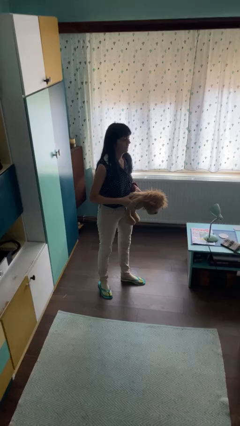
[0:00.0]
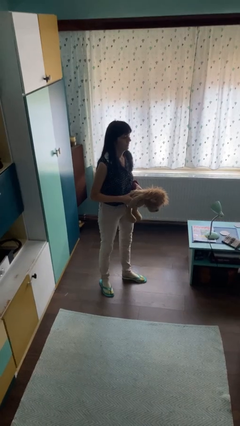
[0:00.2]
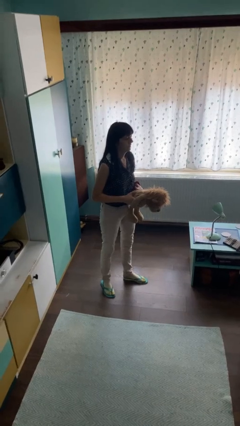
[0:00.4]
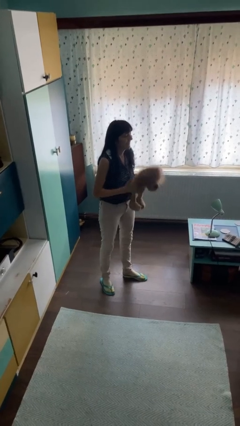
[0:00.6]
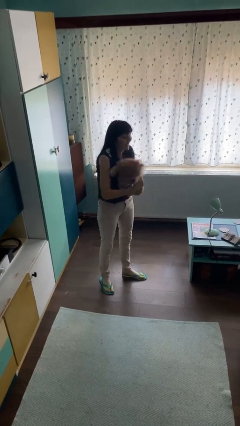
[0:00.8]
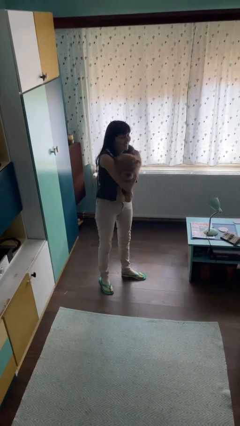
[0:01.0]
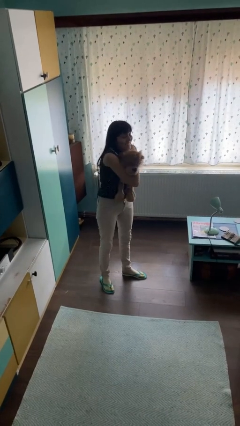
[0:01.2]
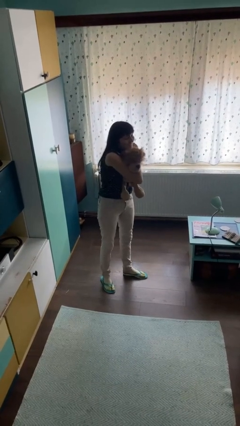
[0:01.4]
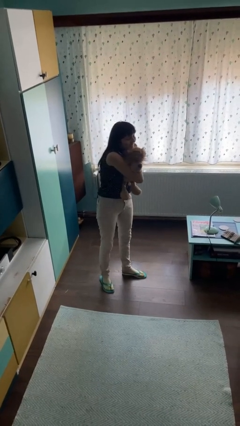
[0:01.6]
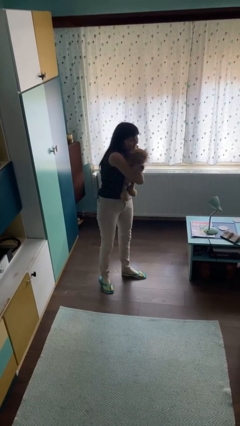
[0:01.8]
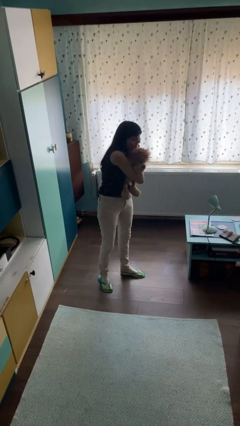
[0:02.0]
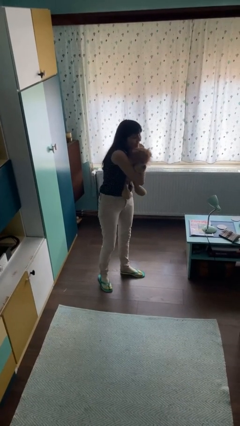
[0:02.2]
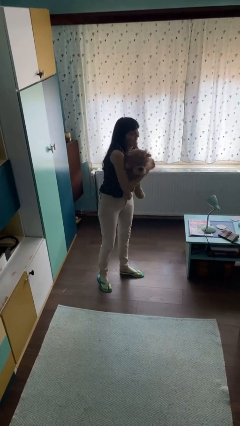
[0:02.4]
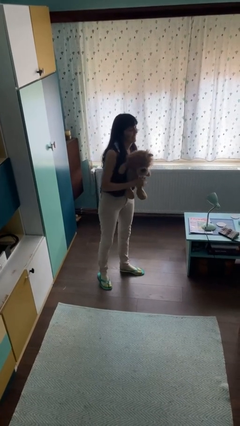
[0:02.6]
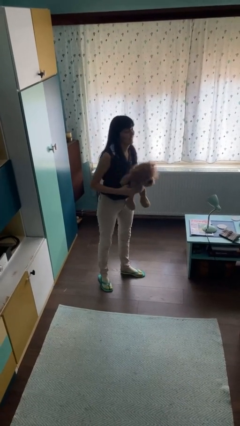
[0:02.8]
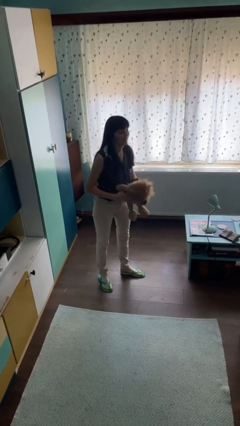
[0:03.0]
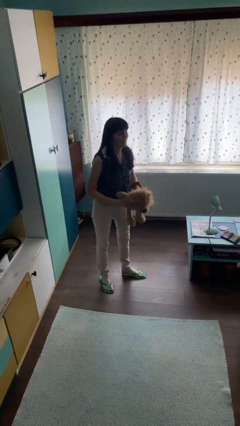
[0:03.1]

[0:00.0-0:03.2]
person squeezes object

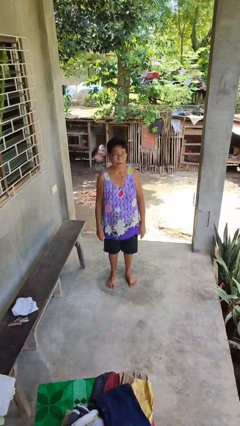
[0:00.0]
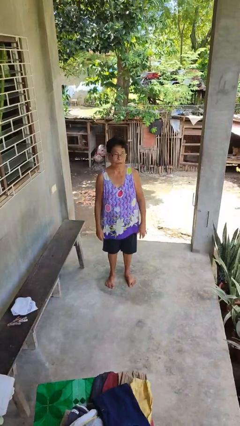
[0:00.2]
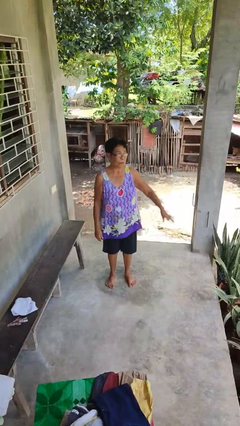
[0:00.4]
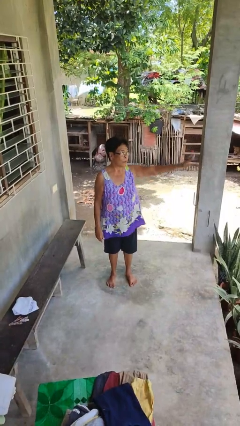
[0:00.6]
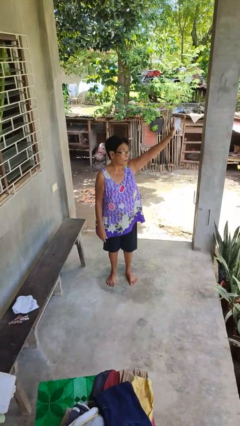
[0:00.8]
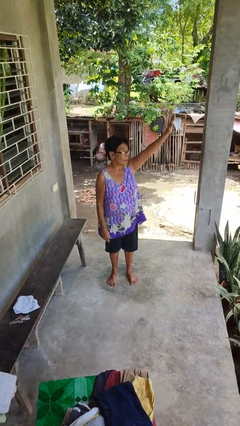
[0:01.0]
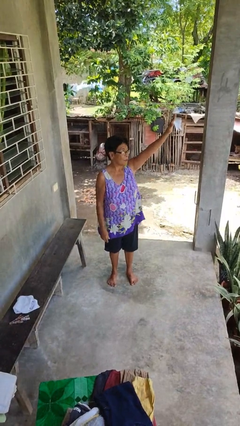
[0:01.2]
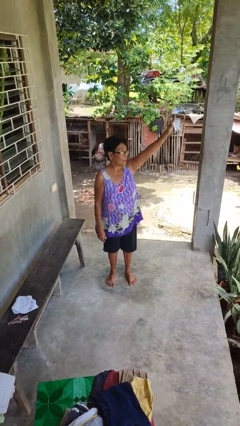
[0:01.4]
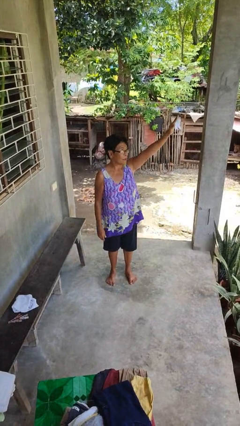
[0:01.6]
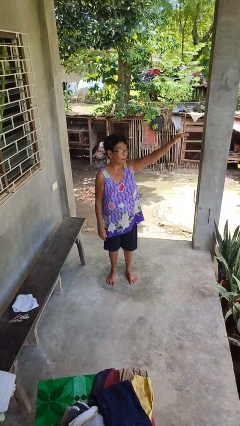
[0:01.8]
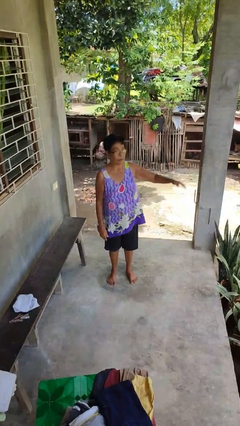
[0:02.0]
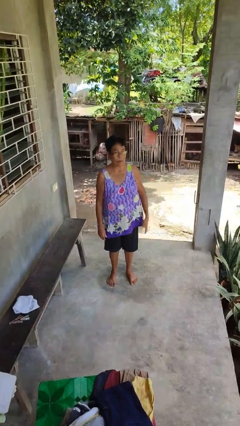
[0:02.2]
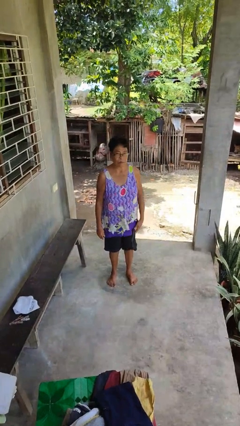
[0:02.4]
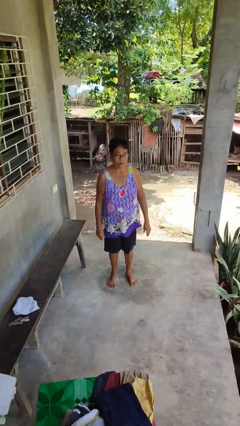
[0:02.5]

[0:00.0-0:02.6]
person gestures stop

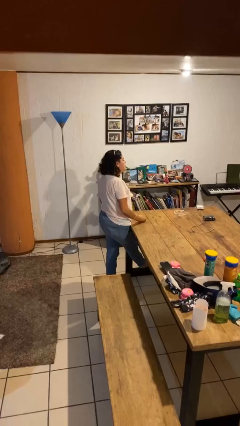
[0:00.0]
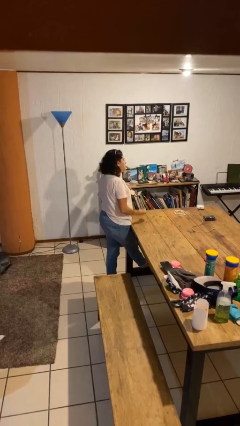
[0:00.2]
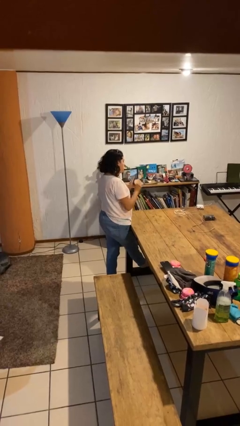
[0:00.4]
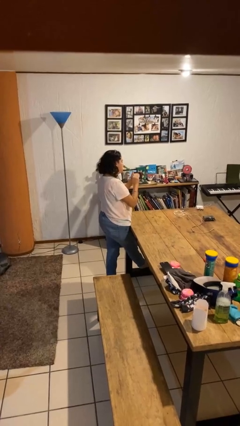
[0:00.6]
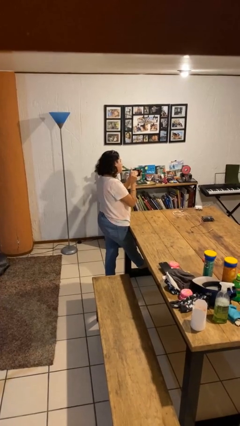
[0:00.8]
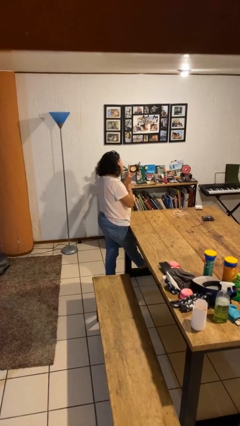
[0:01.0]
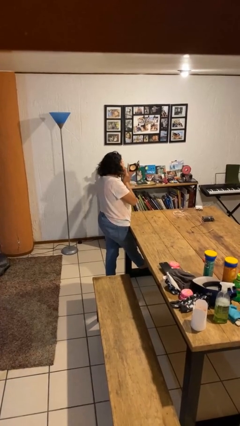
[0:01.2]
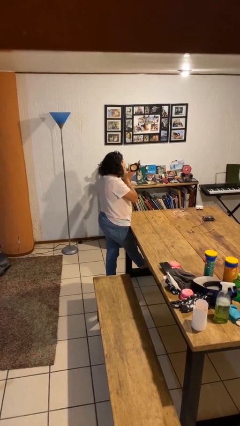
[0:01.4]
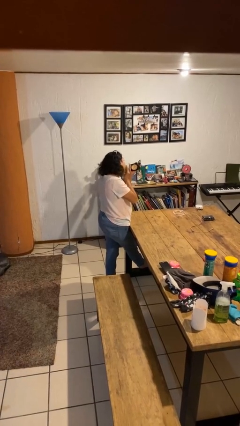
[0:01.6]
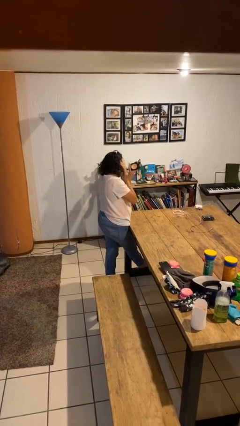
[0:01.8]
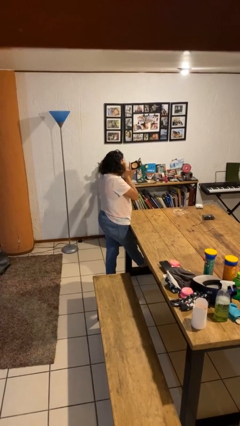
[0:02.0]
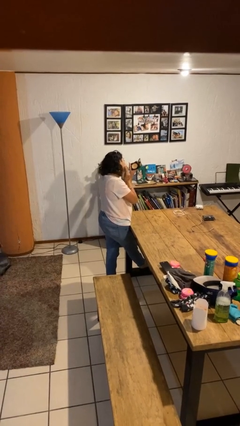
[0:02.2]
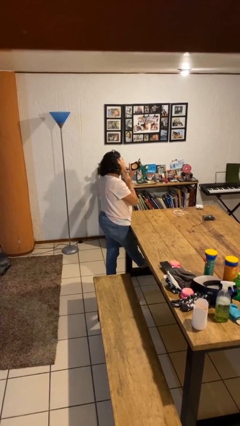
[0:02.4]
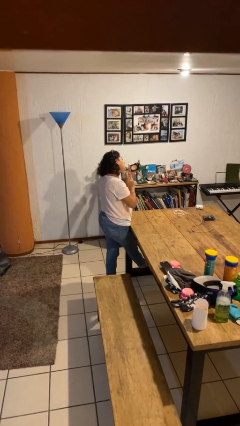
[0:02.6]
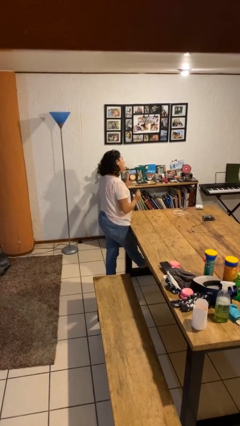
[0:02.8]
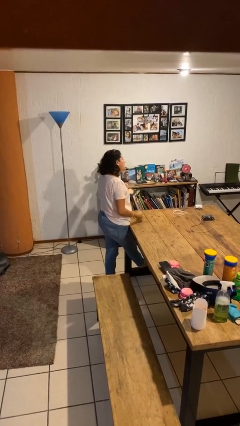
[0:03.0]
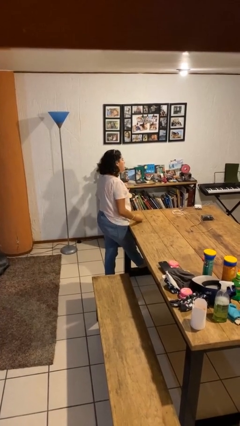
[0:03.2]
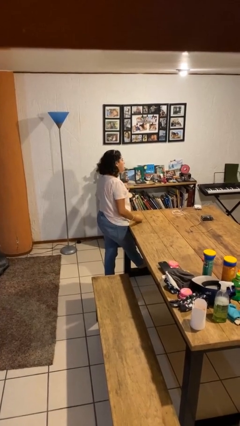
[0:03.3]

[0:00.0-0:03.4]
person applies foundation makeup

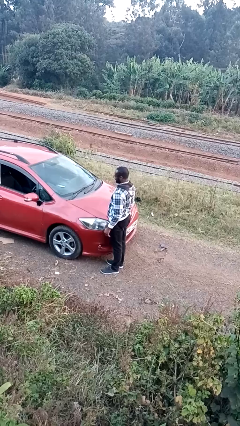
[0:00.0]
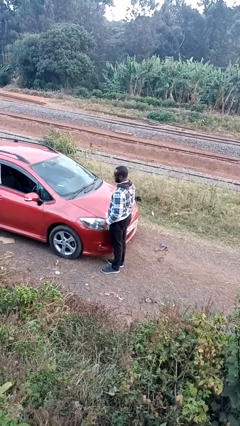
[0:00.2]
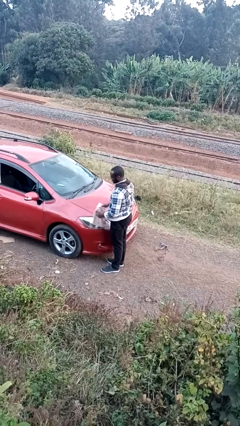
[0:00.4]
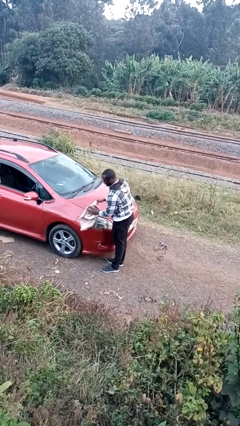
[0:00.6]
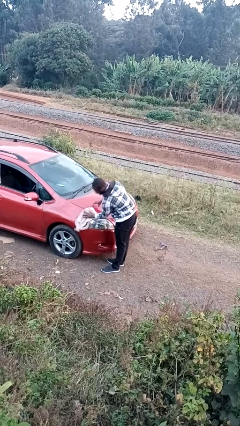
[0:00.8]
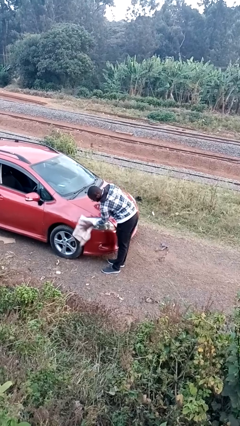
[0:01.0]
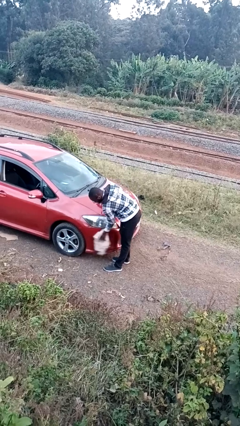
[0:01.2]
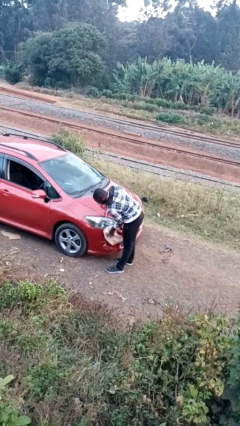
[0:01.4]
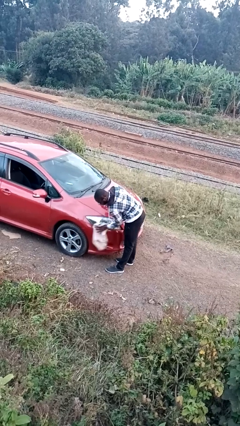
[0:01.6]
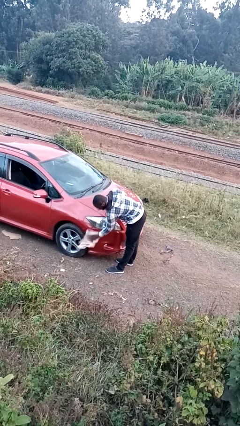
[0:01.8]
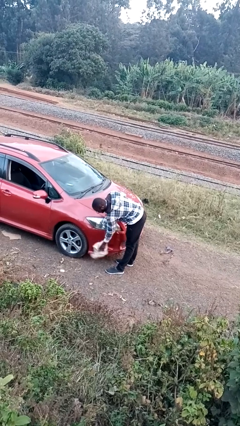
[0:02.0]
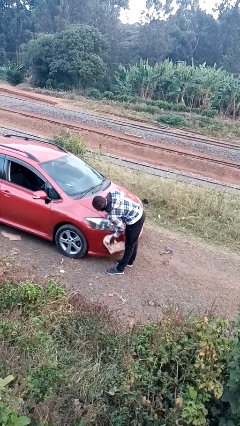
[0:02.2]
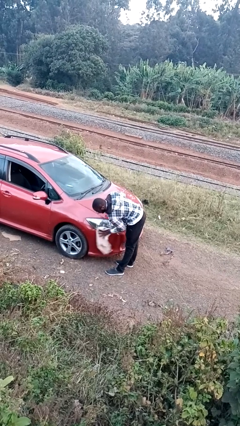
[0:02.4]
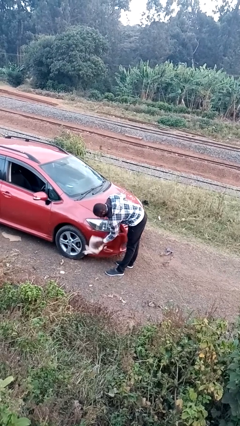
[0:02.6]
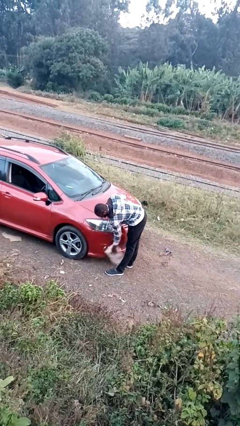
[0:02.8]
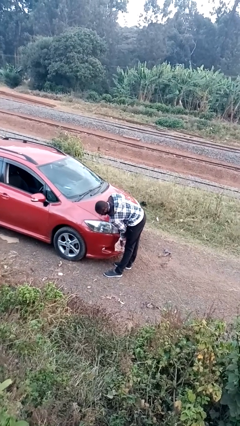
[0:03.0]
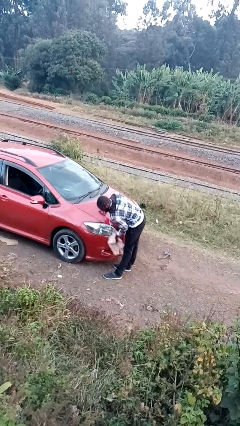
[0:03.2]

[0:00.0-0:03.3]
person polishes car with rag

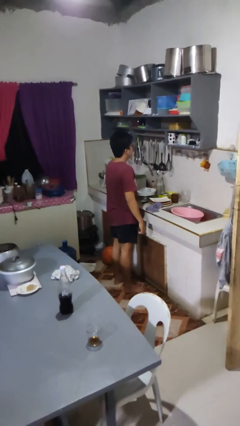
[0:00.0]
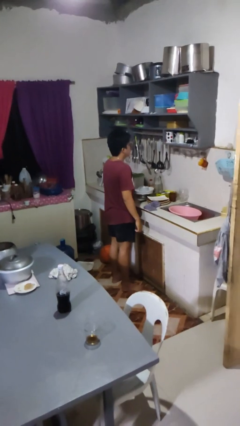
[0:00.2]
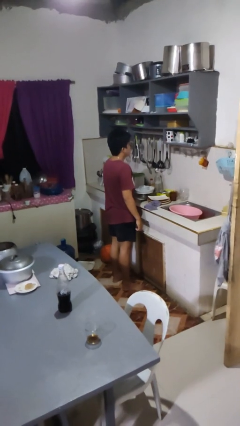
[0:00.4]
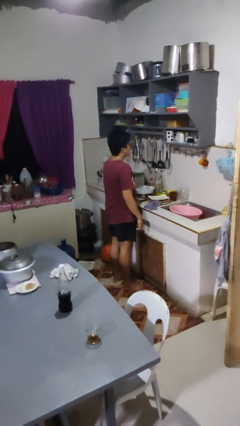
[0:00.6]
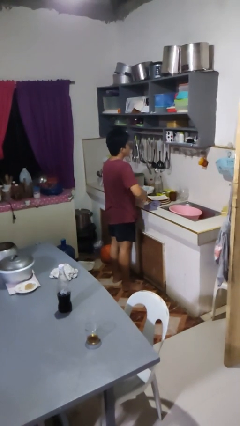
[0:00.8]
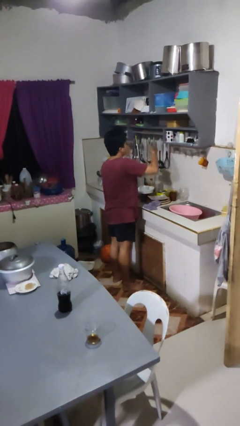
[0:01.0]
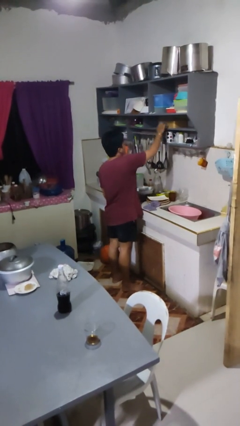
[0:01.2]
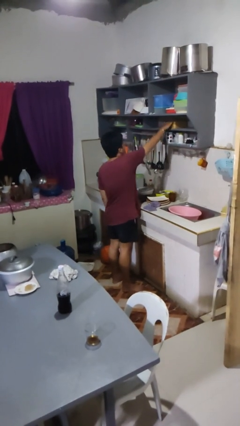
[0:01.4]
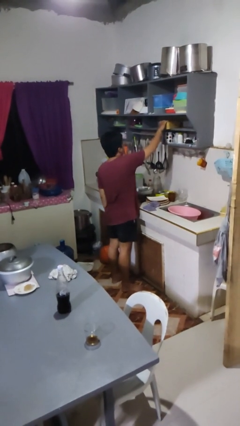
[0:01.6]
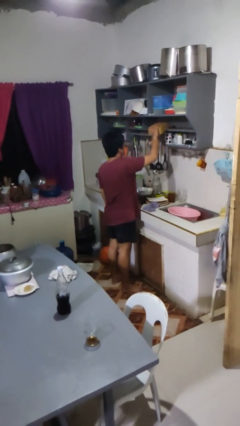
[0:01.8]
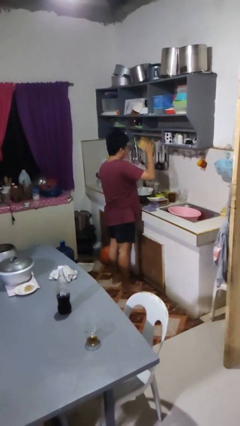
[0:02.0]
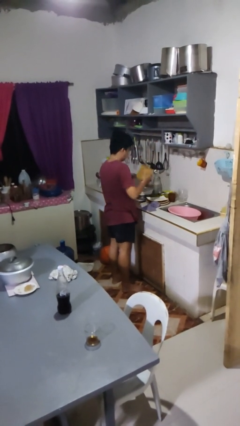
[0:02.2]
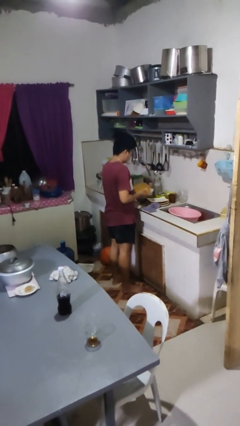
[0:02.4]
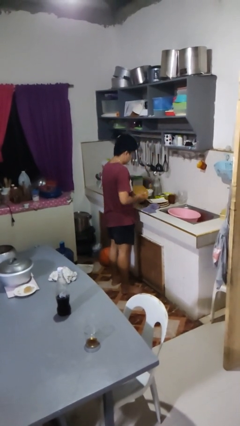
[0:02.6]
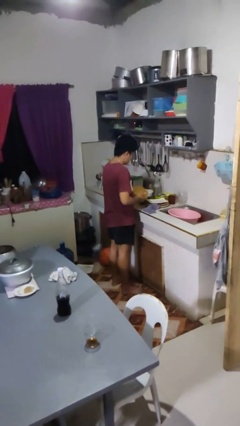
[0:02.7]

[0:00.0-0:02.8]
person takes object from cabinet

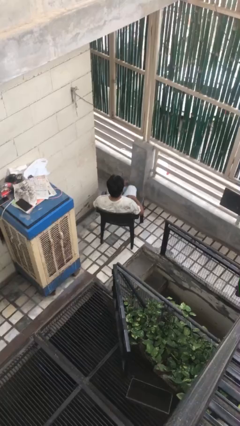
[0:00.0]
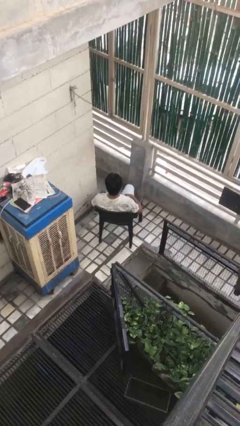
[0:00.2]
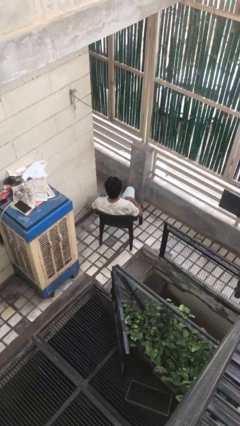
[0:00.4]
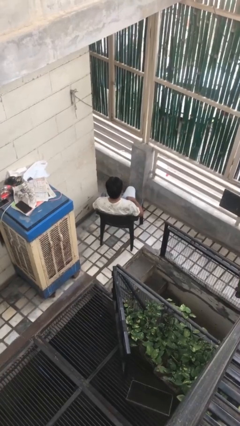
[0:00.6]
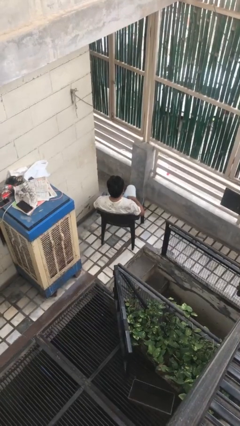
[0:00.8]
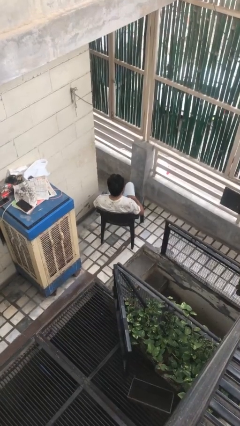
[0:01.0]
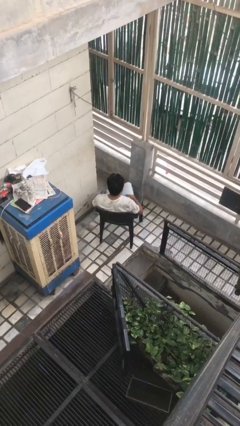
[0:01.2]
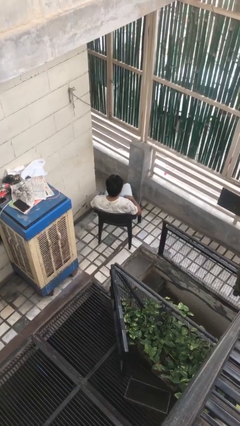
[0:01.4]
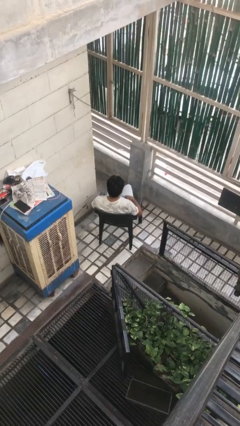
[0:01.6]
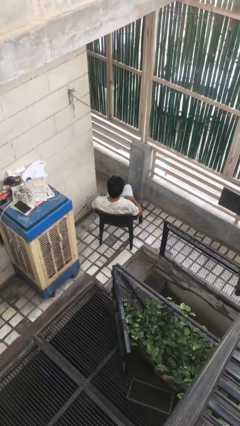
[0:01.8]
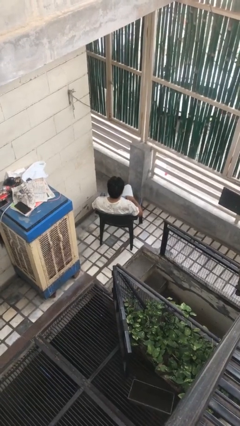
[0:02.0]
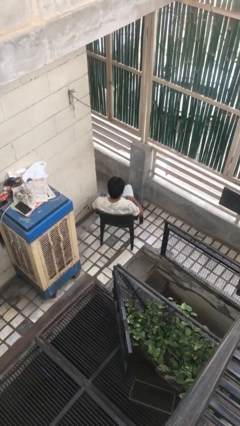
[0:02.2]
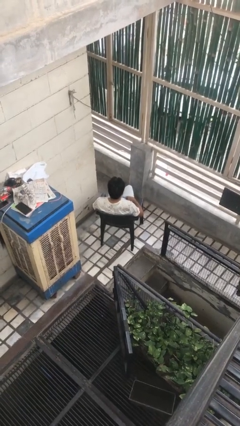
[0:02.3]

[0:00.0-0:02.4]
person crosses legs
